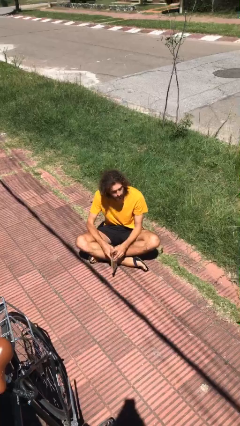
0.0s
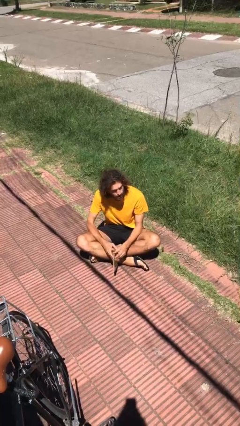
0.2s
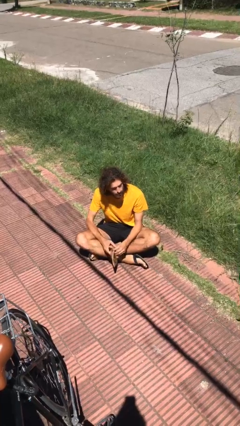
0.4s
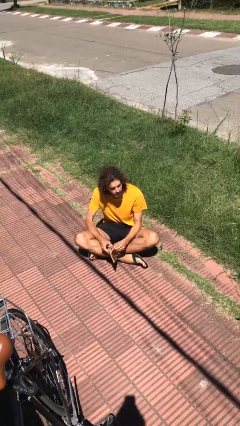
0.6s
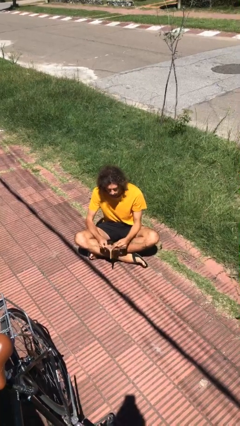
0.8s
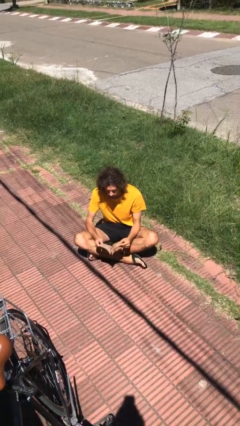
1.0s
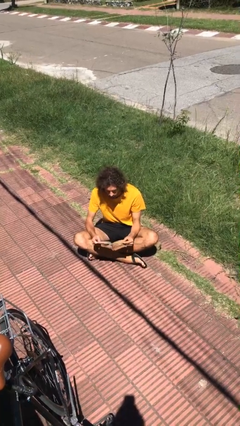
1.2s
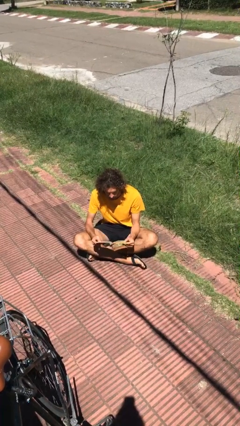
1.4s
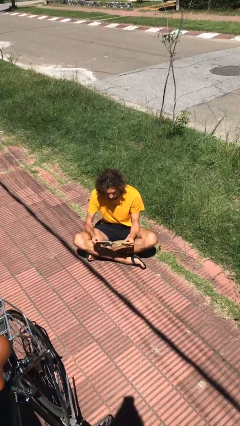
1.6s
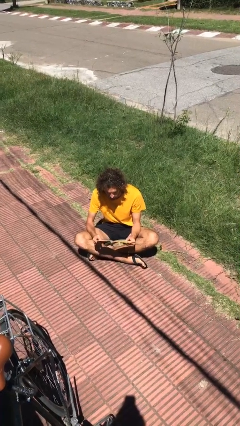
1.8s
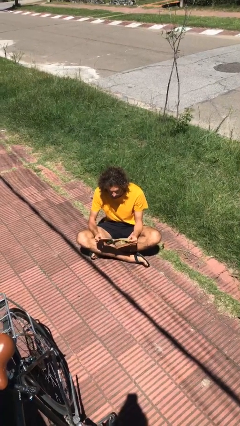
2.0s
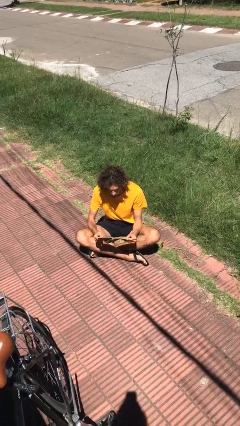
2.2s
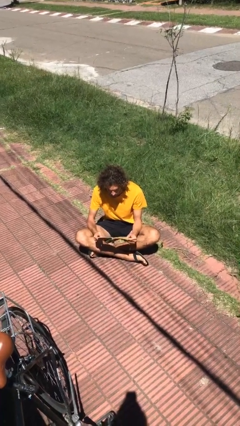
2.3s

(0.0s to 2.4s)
person reads document

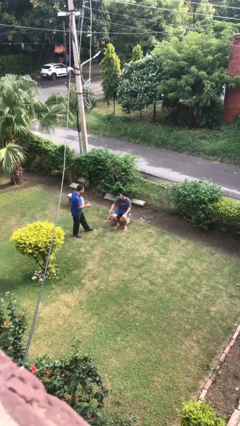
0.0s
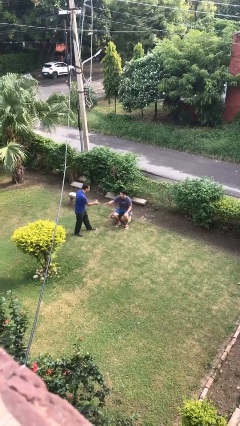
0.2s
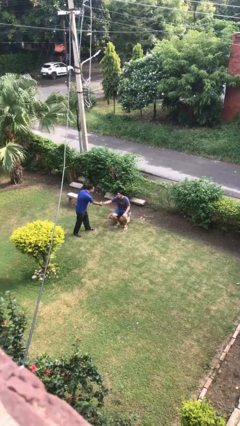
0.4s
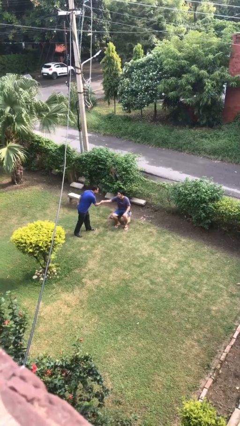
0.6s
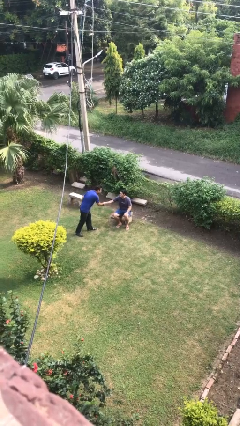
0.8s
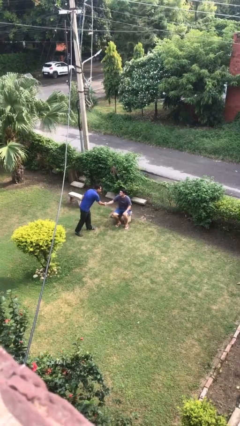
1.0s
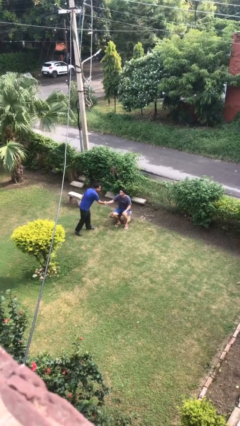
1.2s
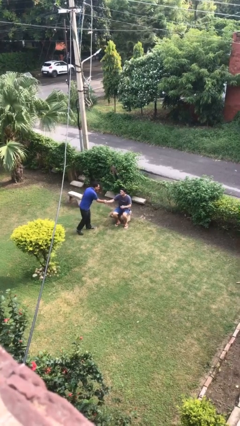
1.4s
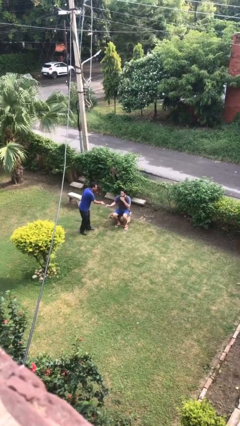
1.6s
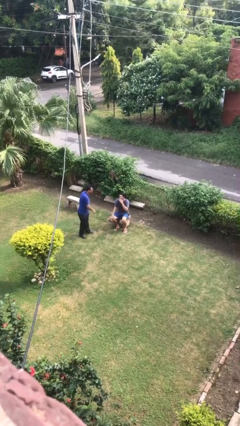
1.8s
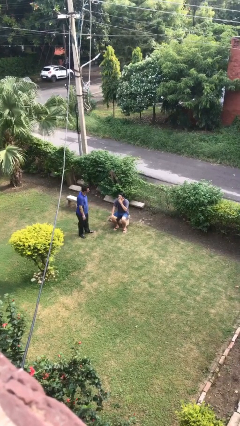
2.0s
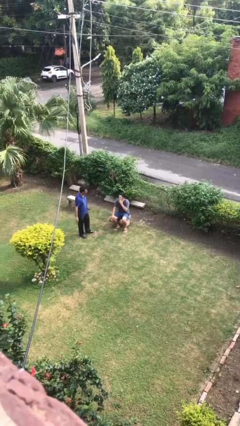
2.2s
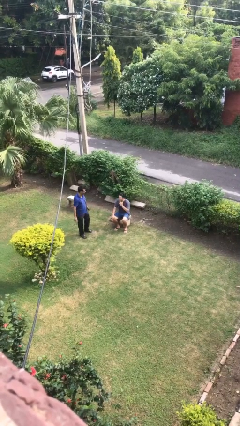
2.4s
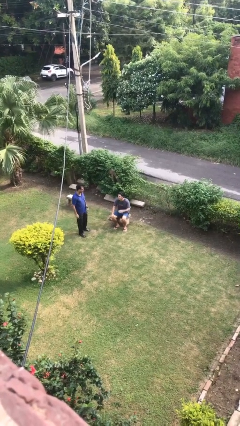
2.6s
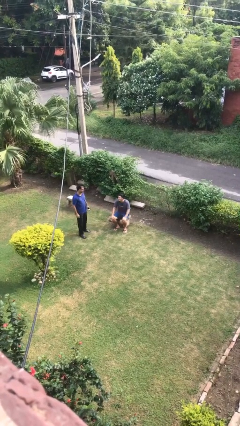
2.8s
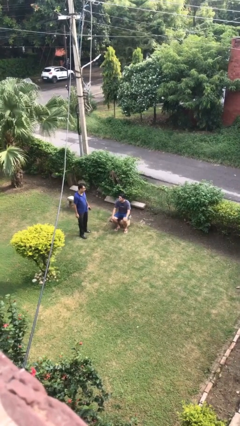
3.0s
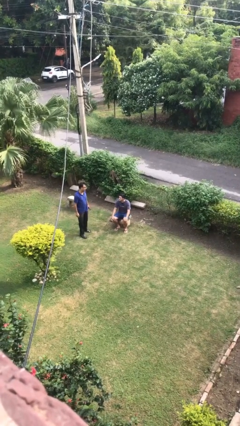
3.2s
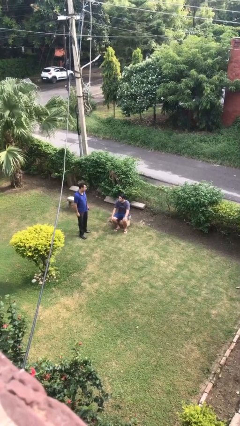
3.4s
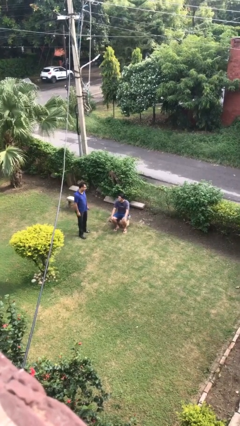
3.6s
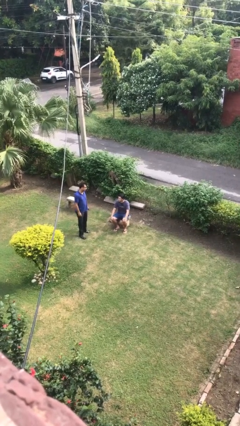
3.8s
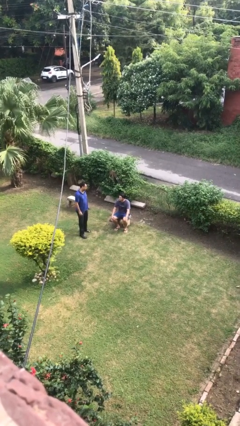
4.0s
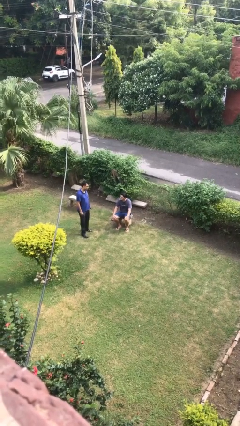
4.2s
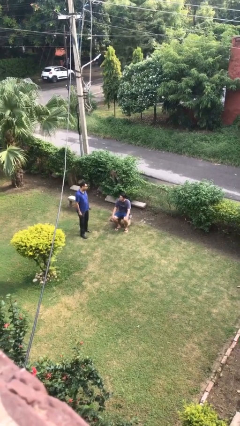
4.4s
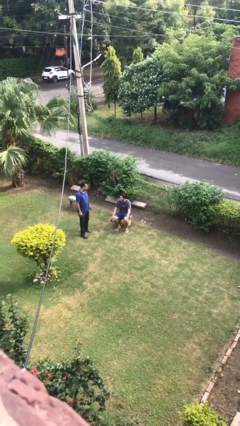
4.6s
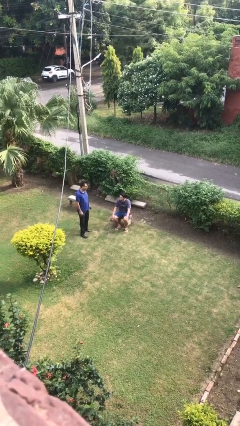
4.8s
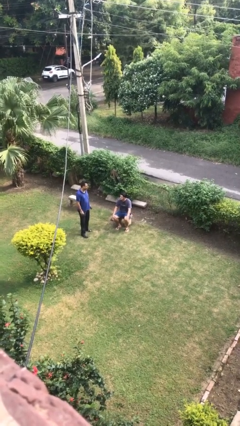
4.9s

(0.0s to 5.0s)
person shakes hand

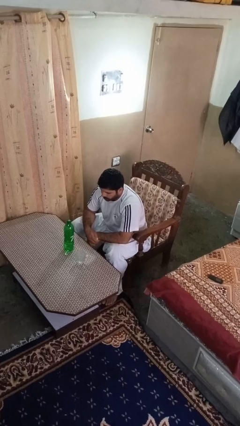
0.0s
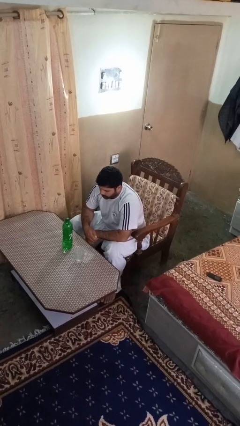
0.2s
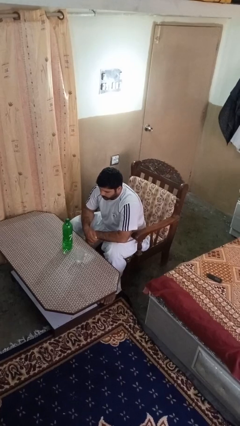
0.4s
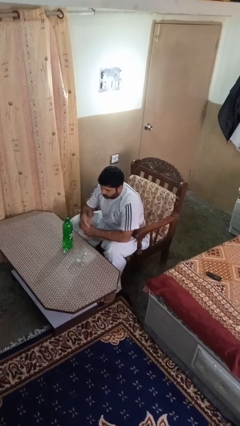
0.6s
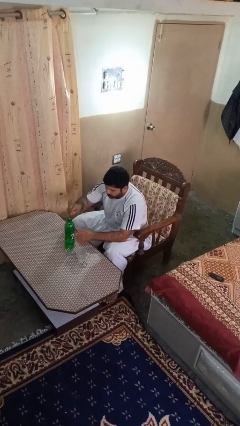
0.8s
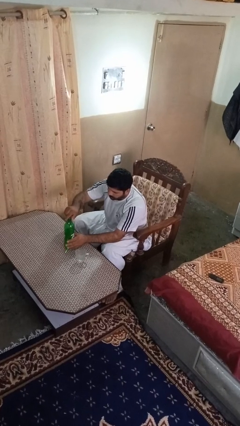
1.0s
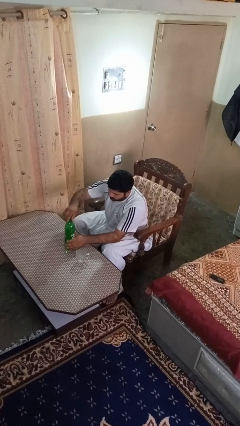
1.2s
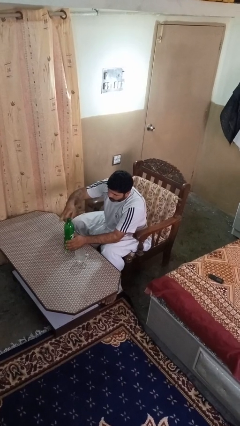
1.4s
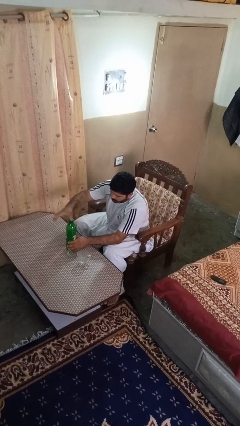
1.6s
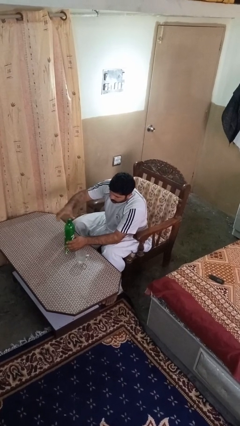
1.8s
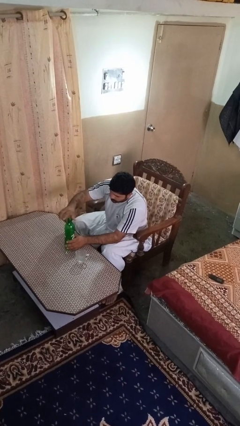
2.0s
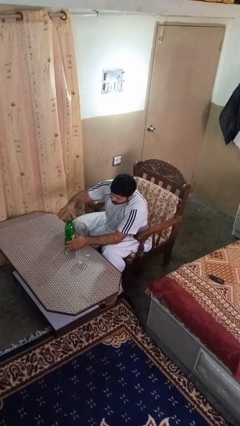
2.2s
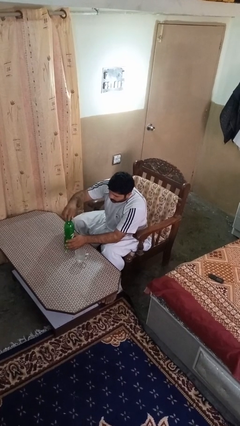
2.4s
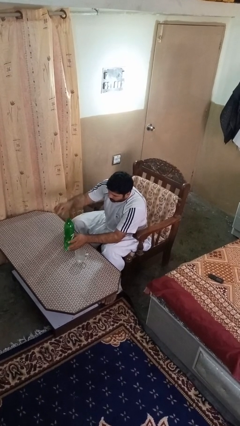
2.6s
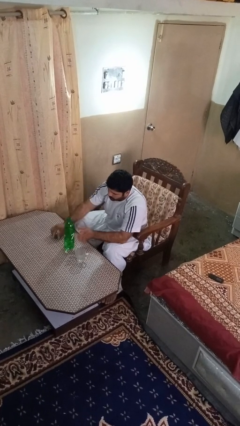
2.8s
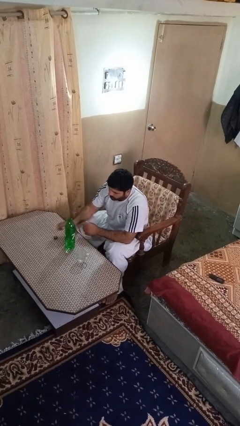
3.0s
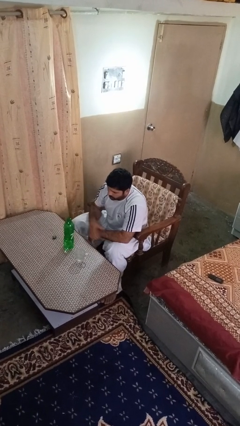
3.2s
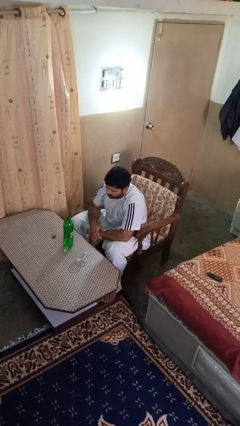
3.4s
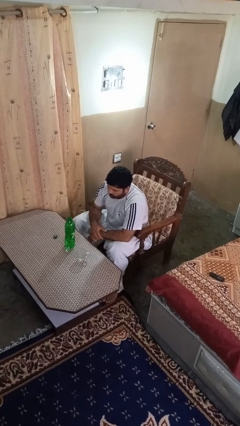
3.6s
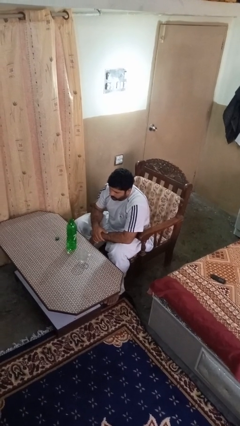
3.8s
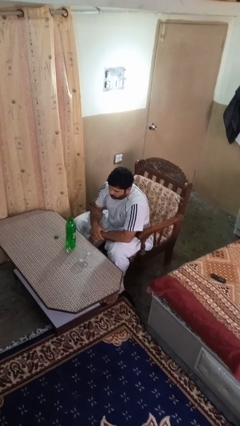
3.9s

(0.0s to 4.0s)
person unscrews lid from bottle

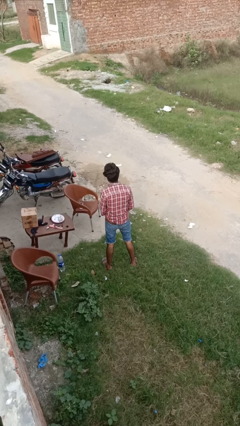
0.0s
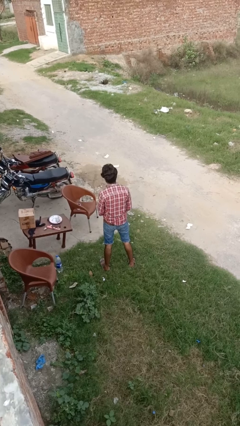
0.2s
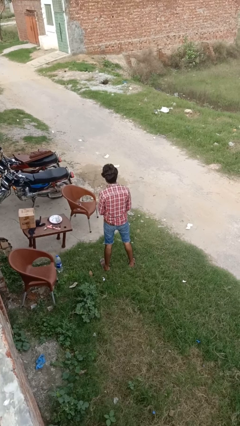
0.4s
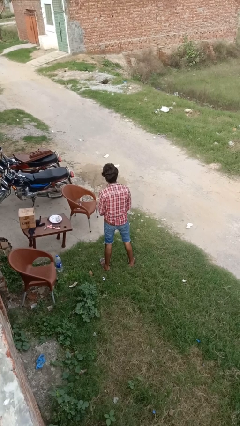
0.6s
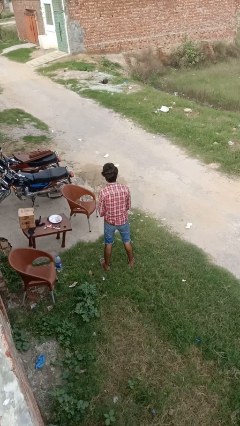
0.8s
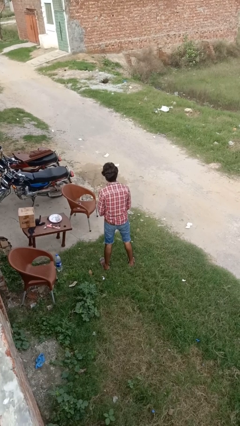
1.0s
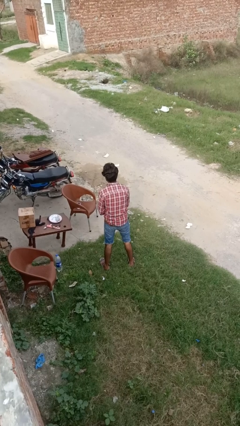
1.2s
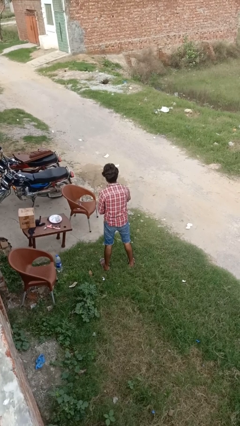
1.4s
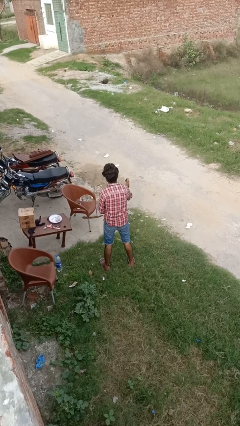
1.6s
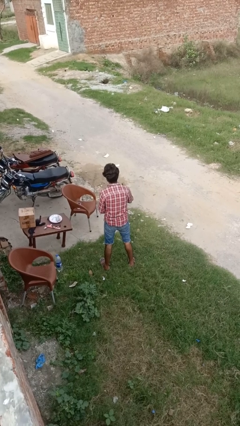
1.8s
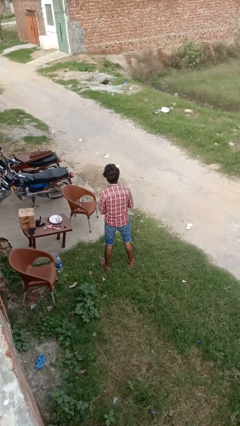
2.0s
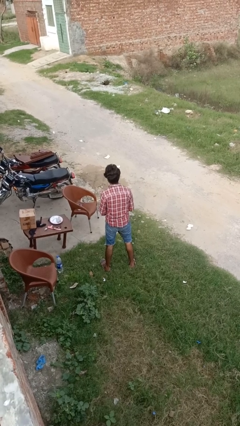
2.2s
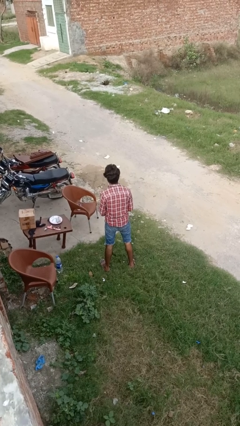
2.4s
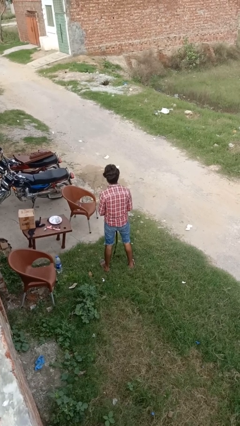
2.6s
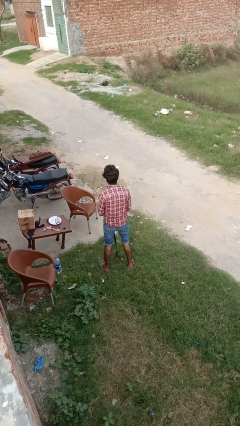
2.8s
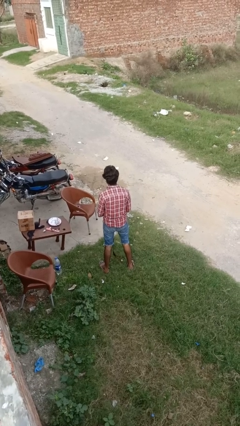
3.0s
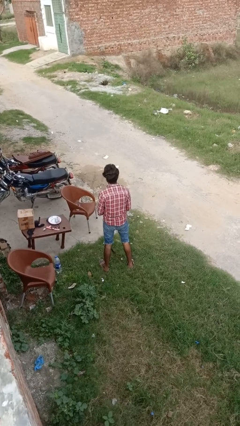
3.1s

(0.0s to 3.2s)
person takes off belt

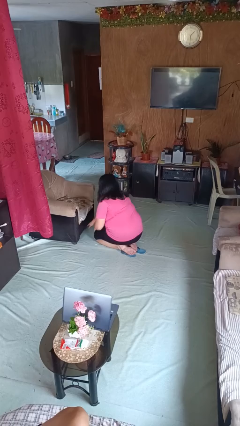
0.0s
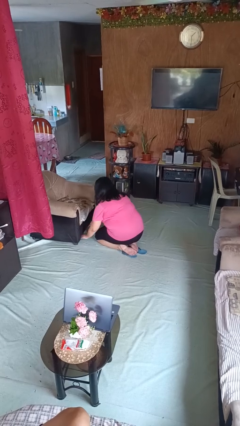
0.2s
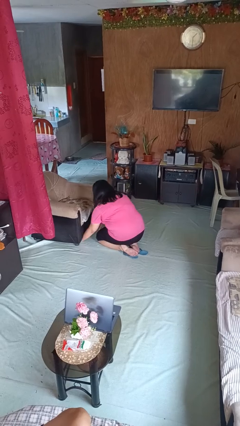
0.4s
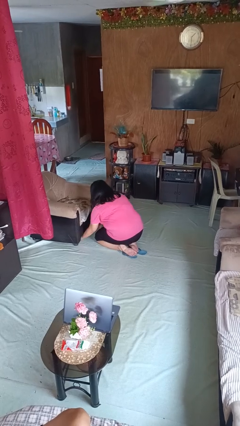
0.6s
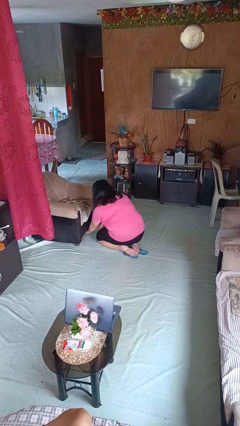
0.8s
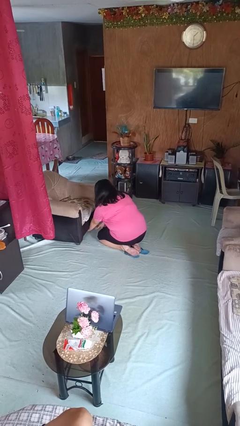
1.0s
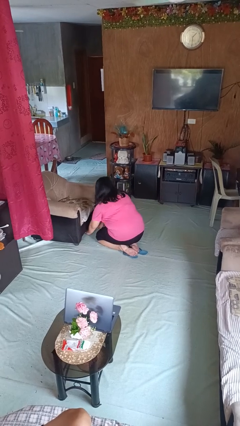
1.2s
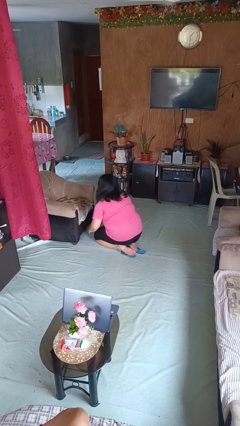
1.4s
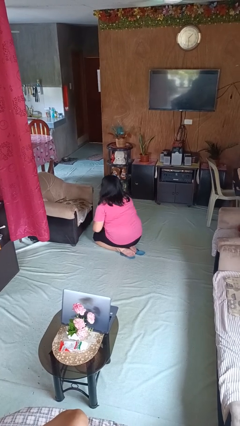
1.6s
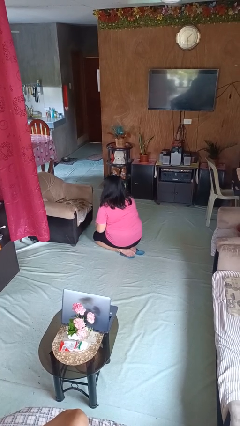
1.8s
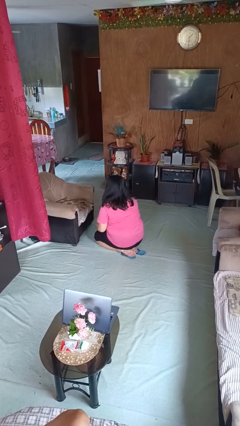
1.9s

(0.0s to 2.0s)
person searches under couch

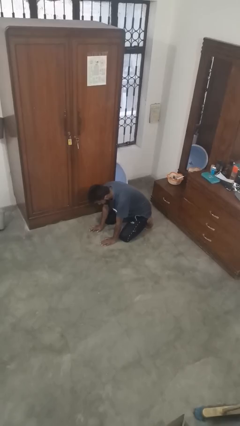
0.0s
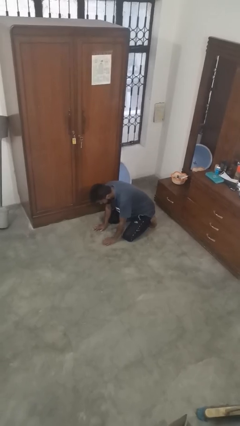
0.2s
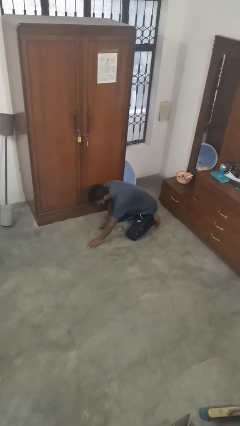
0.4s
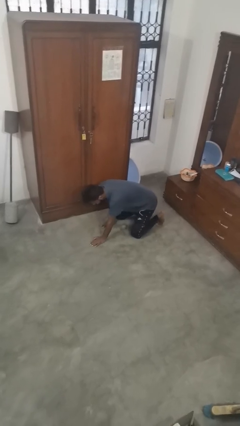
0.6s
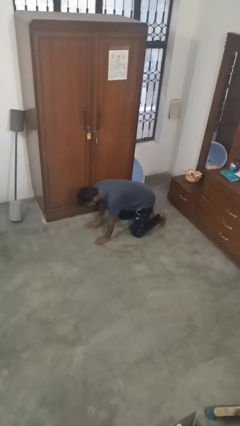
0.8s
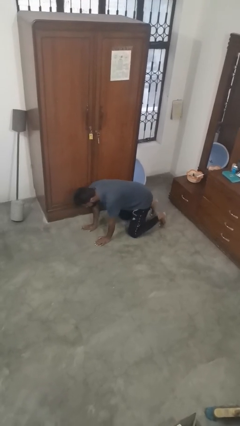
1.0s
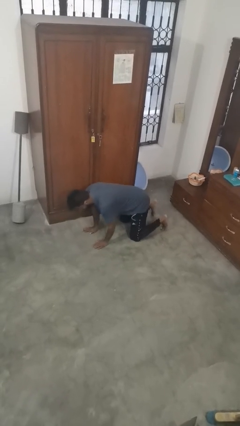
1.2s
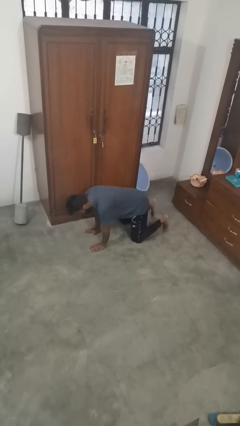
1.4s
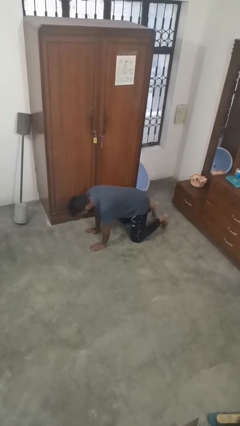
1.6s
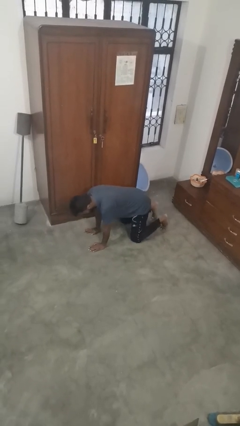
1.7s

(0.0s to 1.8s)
person crawls
